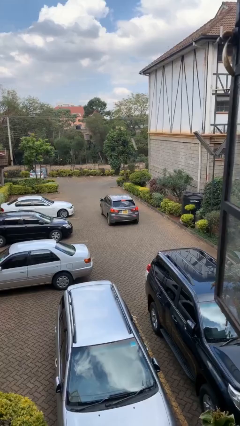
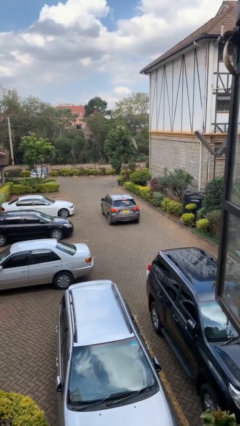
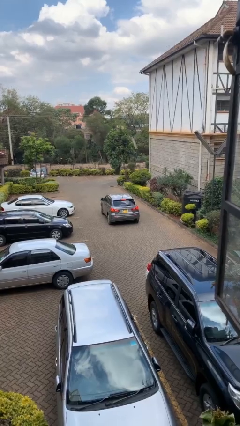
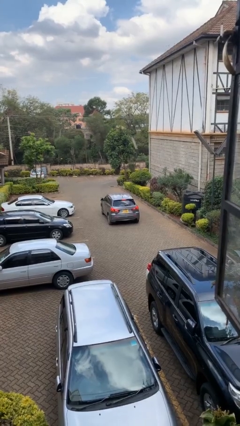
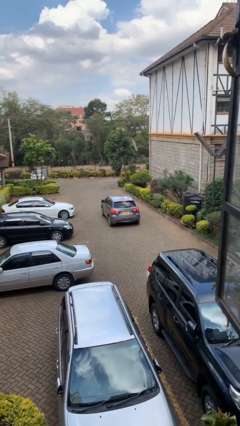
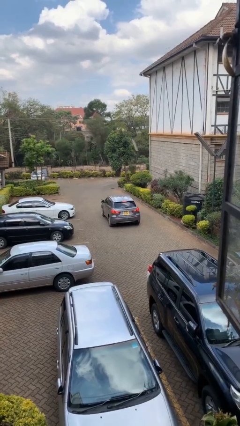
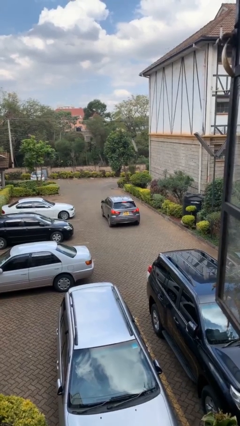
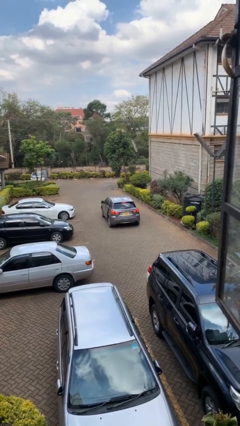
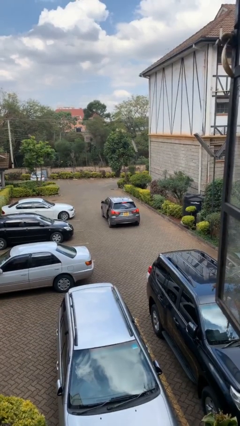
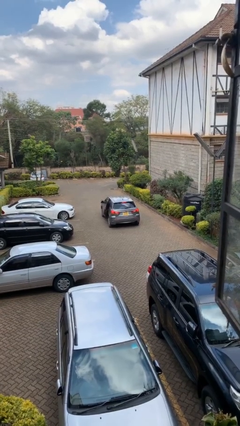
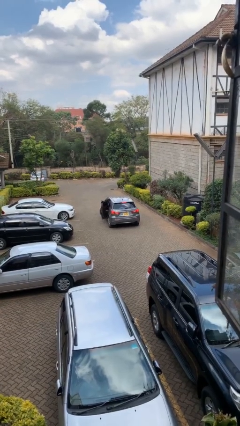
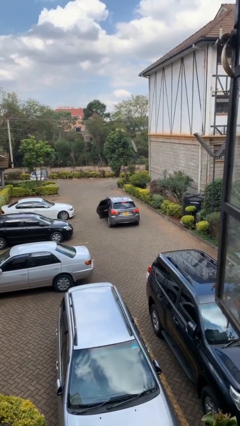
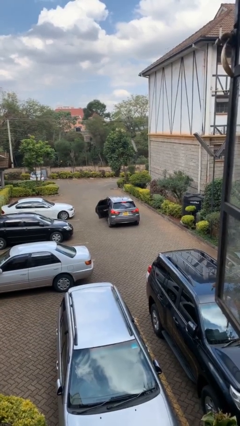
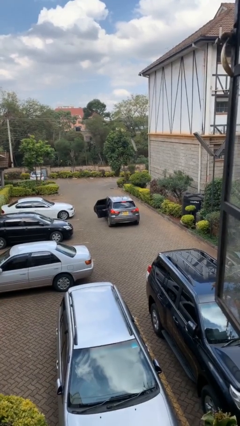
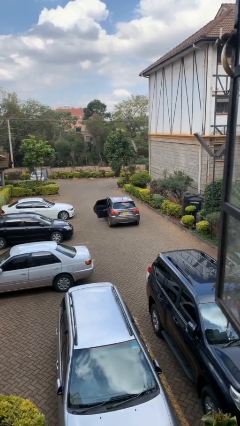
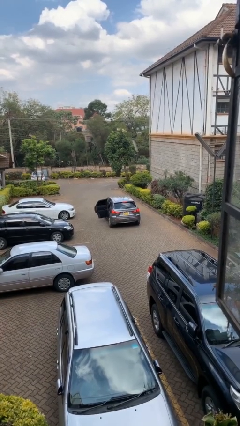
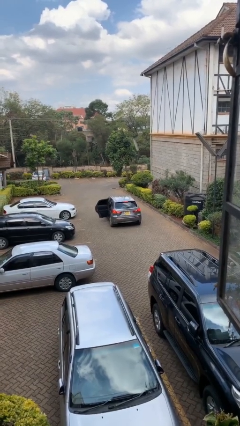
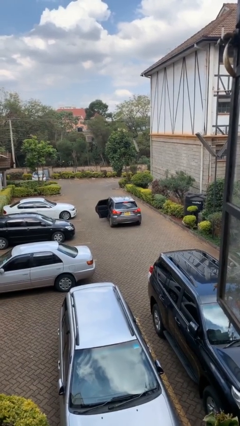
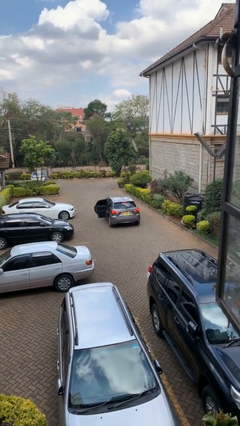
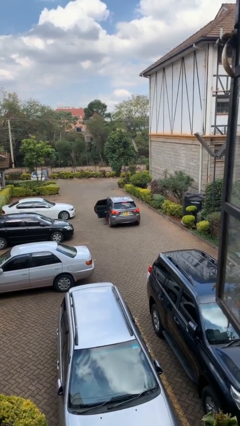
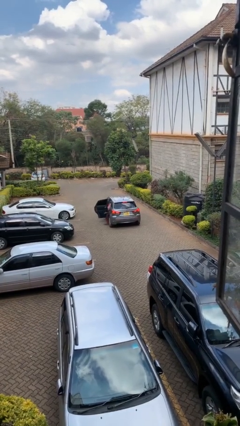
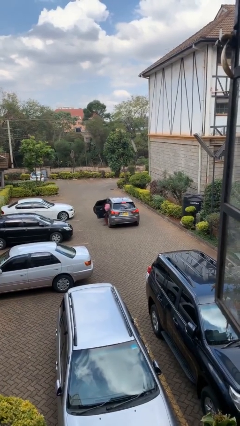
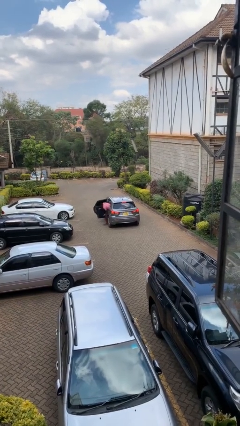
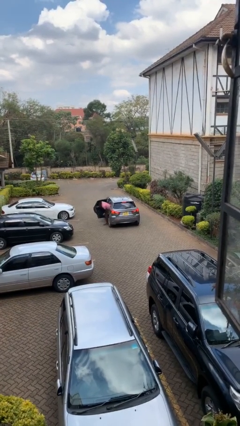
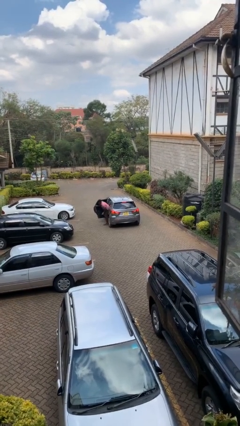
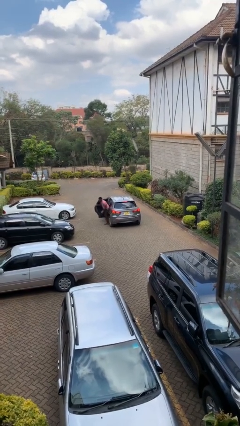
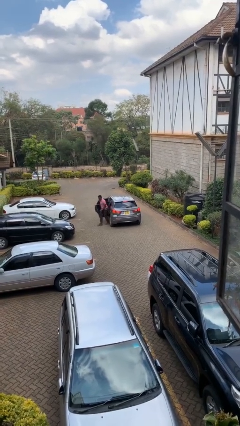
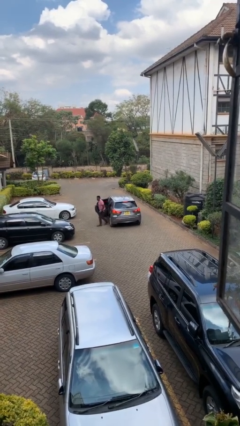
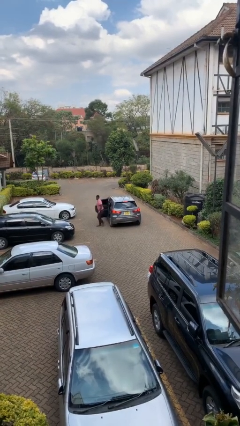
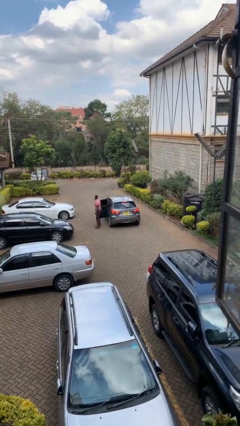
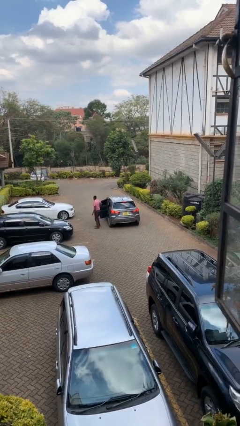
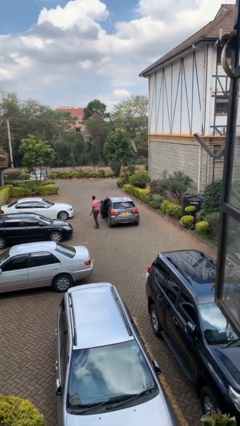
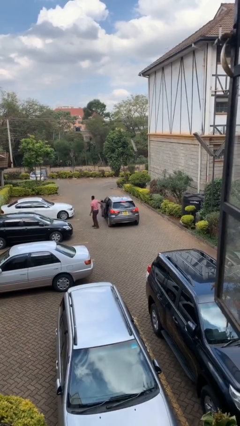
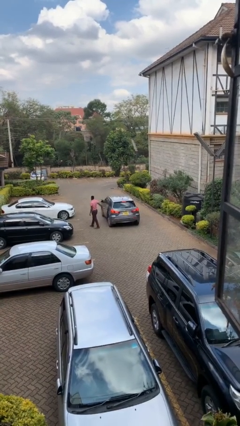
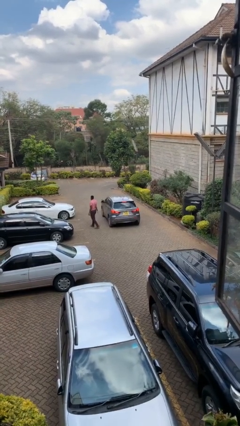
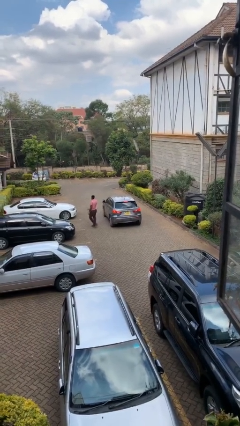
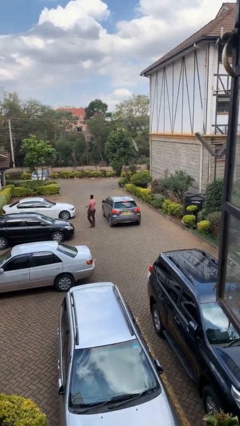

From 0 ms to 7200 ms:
car drops off person

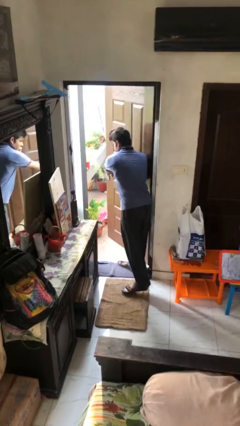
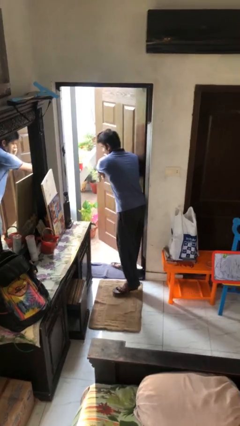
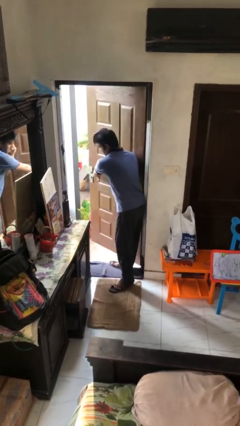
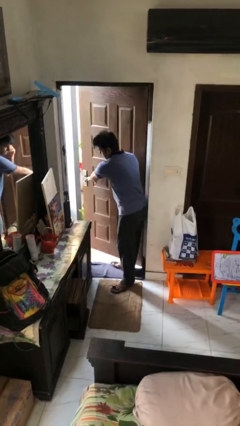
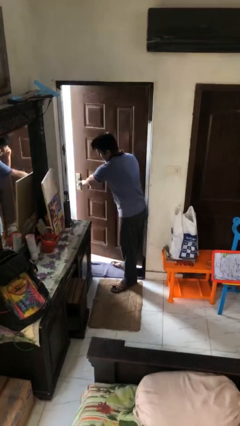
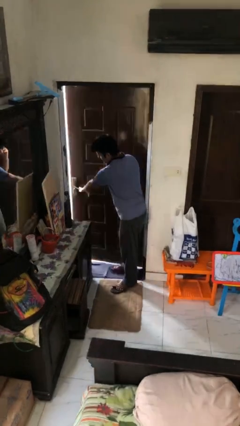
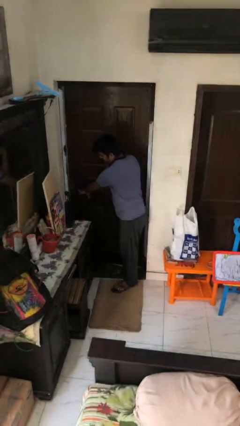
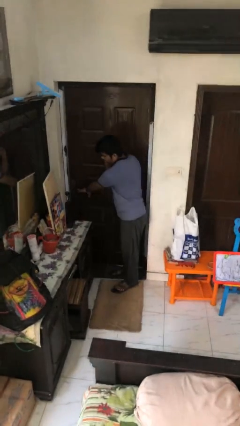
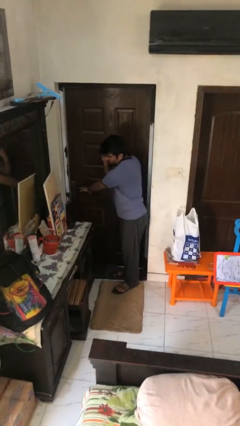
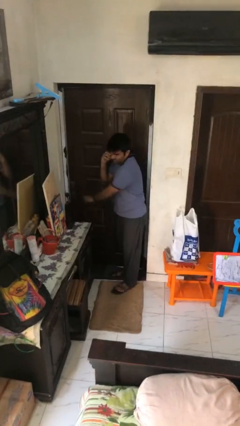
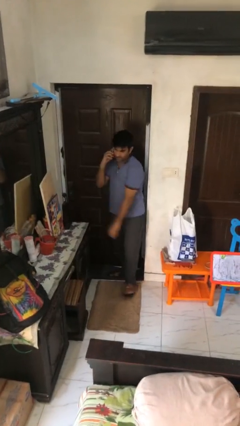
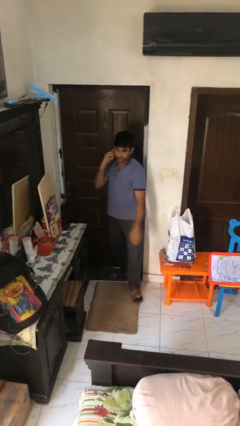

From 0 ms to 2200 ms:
person closes facility door

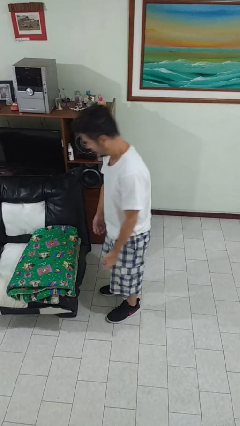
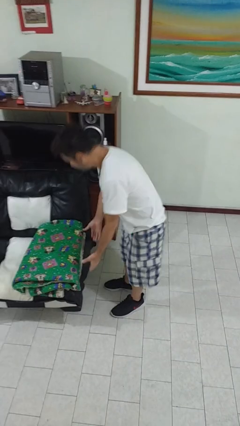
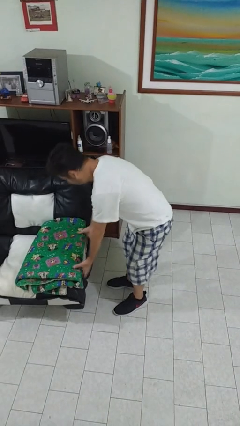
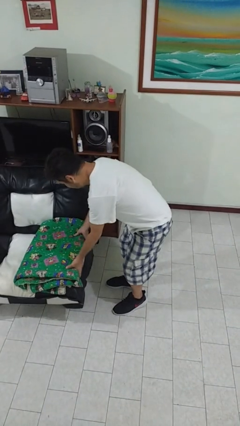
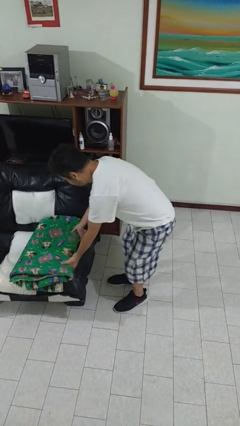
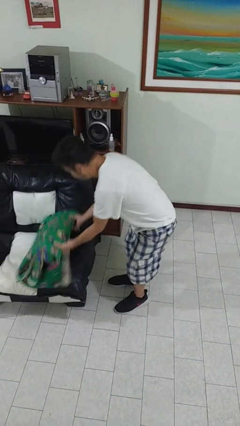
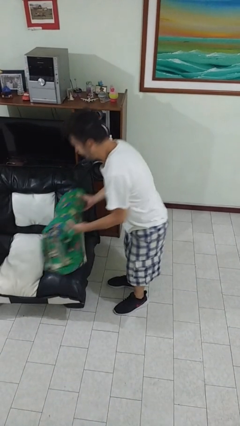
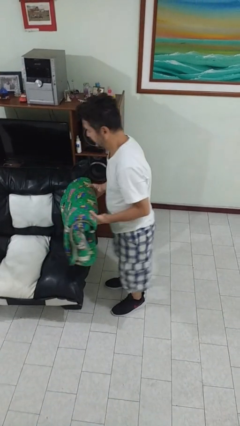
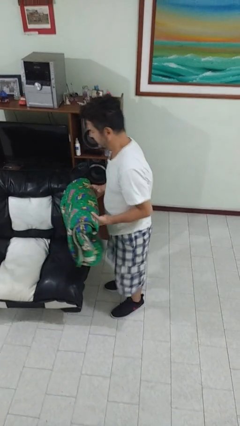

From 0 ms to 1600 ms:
person picks up object from couch

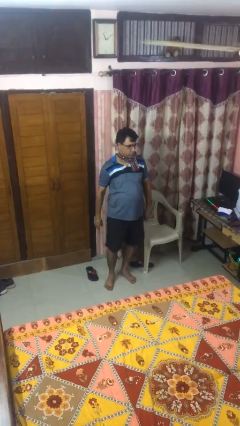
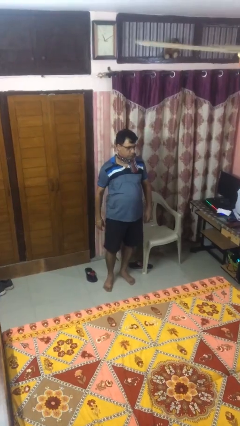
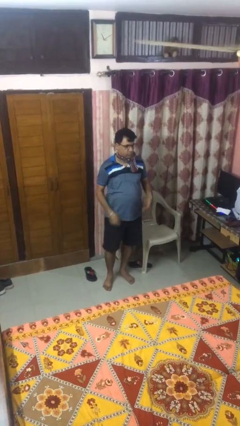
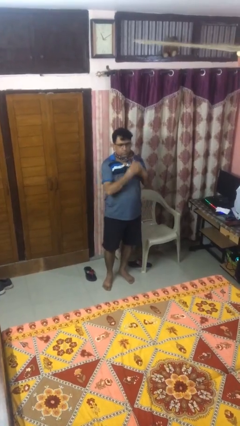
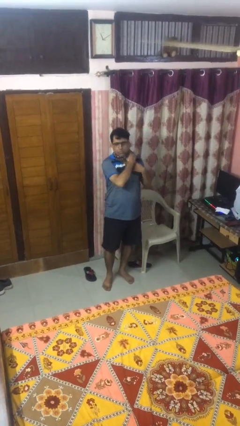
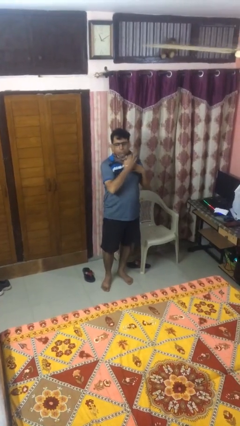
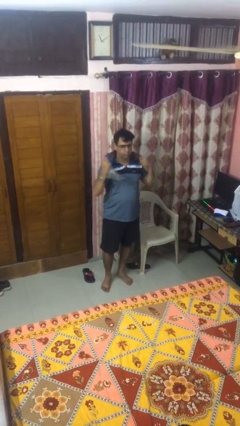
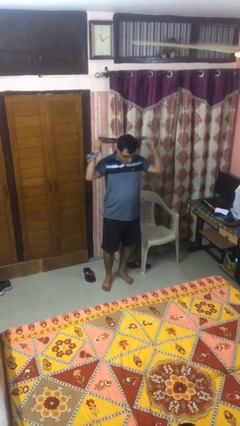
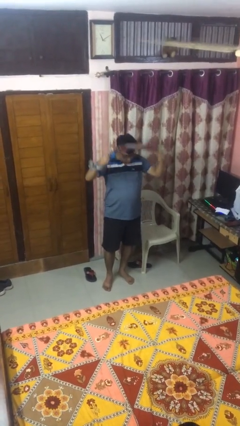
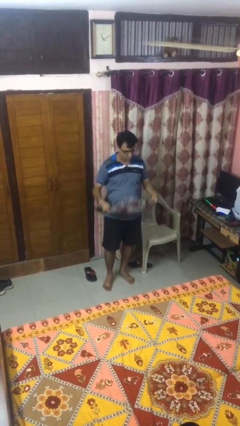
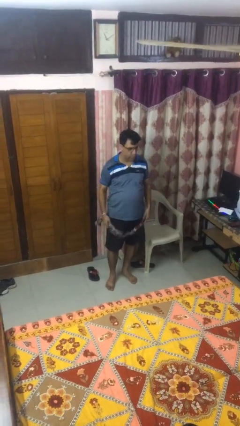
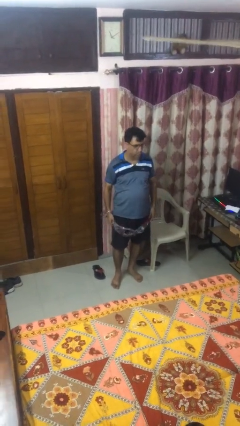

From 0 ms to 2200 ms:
person takes off scarf

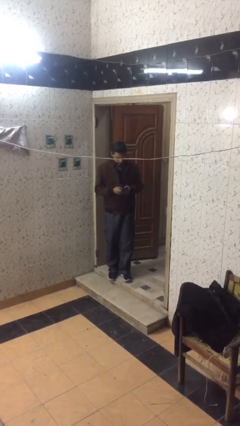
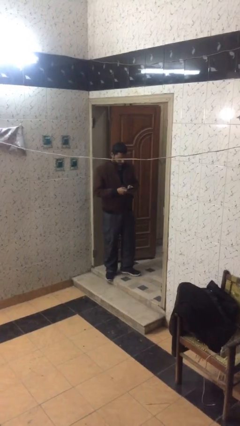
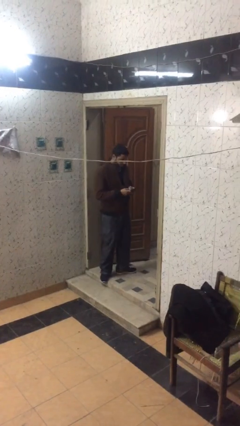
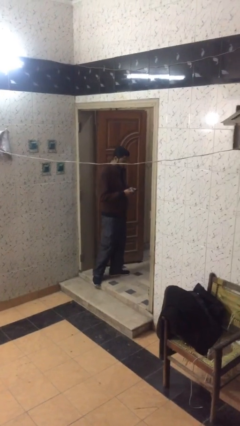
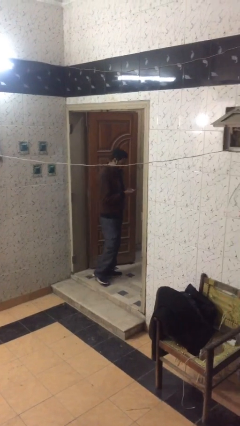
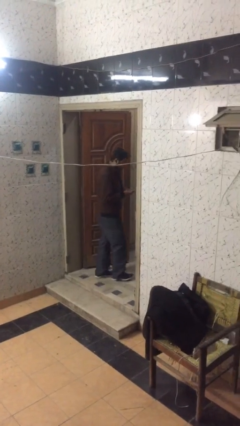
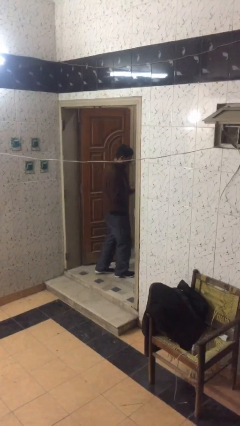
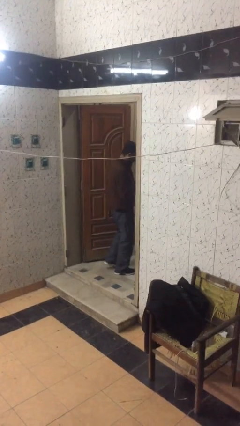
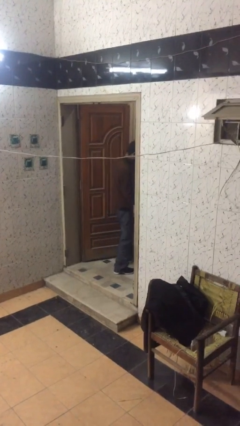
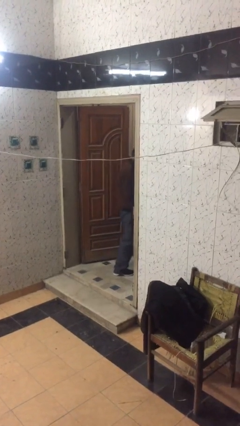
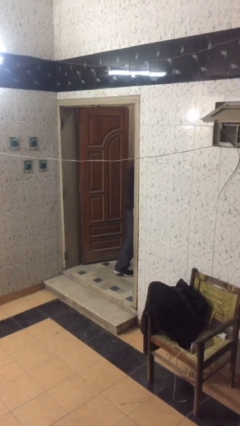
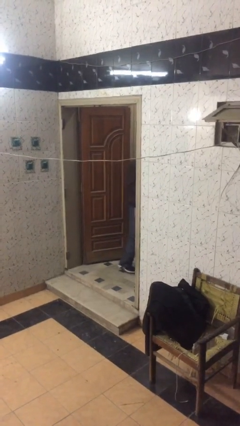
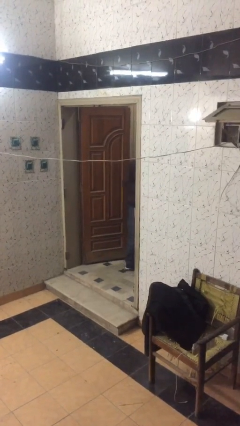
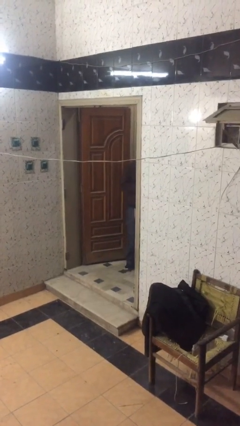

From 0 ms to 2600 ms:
person exits scene through structure

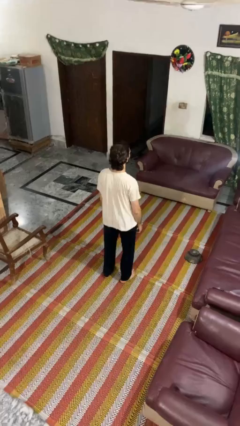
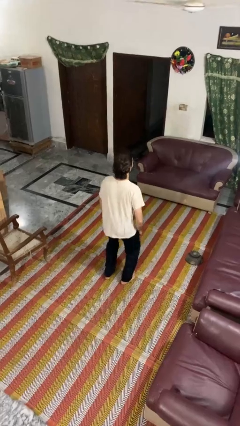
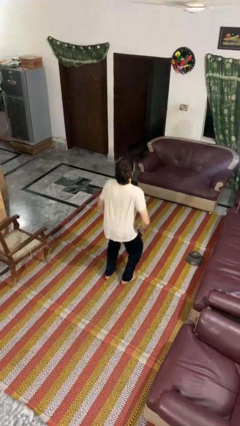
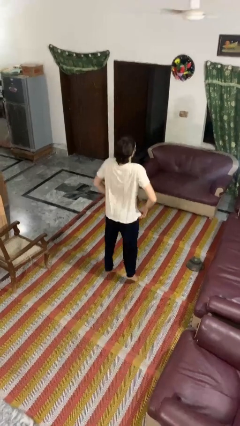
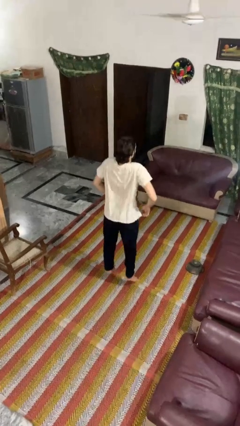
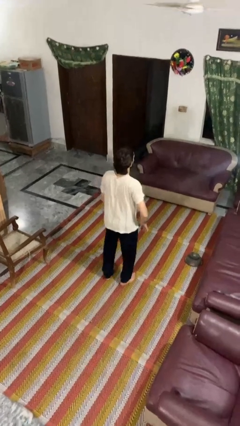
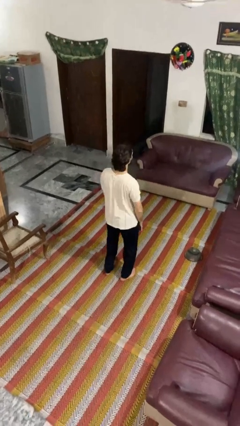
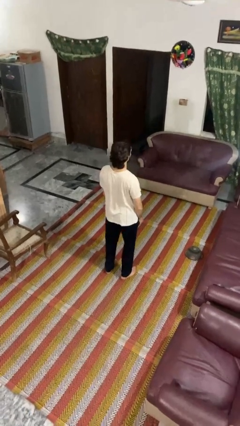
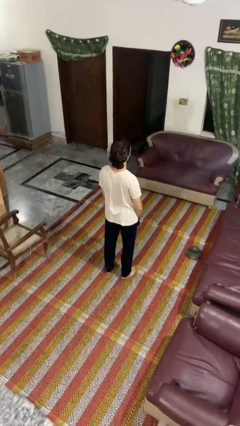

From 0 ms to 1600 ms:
person jumps
